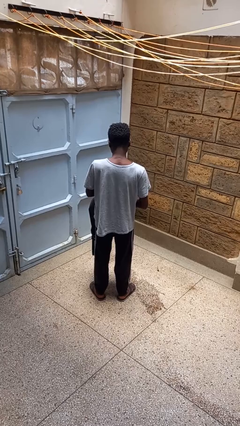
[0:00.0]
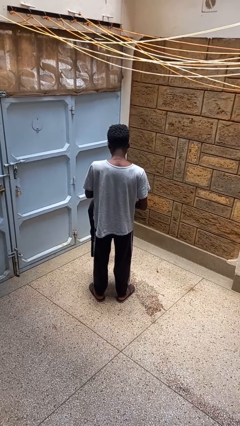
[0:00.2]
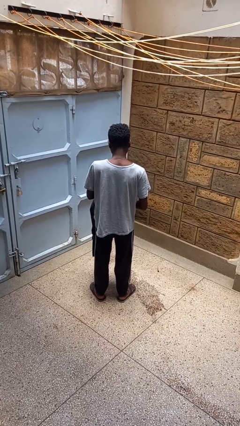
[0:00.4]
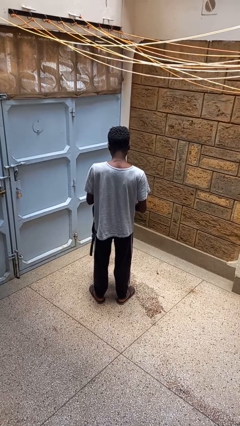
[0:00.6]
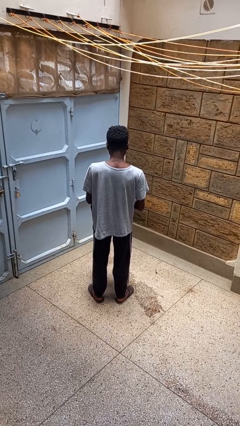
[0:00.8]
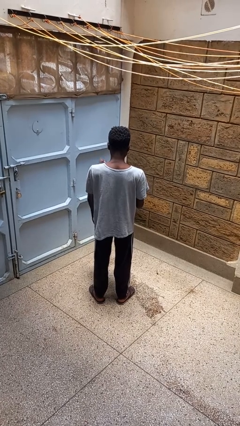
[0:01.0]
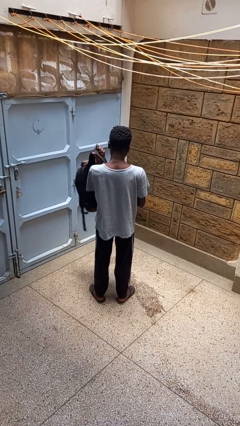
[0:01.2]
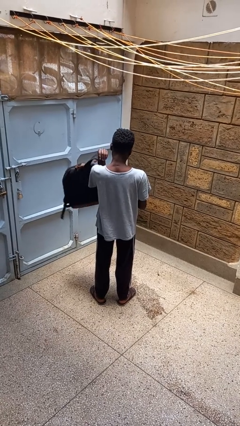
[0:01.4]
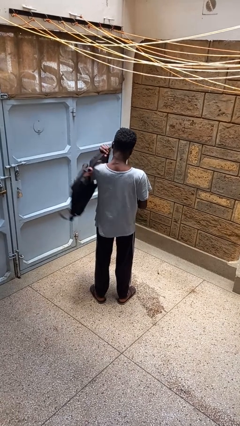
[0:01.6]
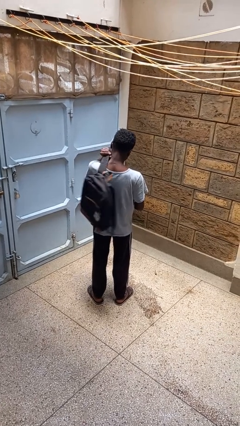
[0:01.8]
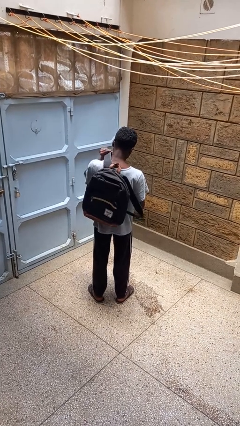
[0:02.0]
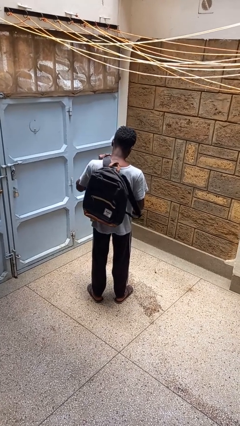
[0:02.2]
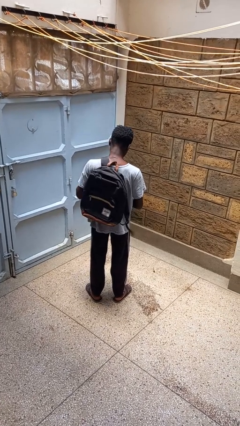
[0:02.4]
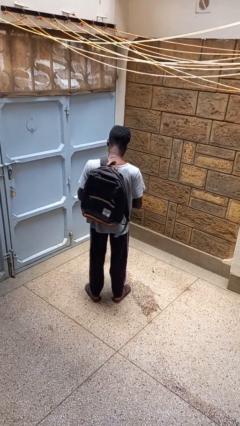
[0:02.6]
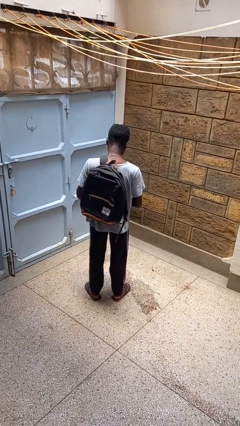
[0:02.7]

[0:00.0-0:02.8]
person puts on backpack

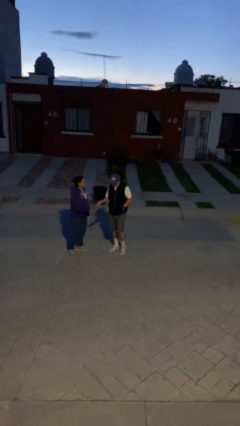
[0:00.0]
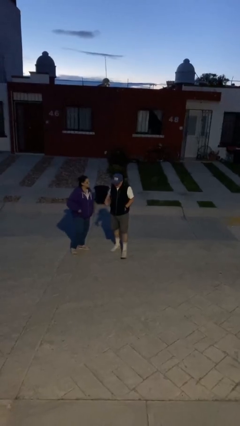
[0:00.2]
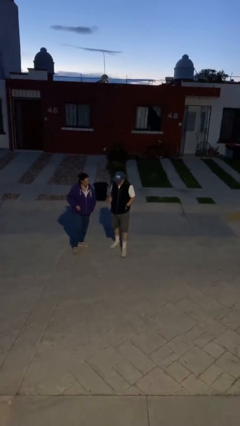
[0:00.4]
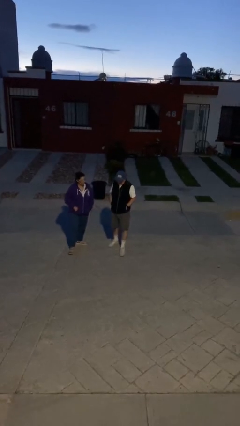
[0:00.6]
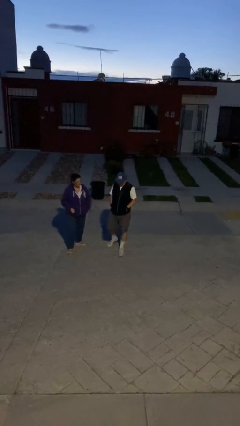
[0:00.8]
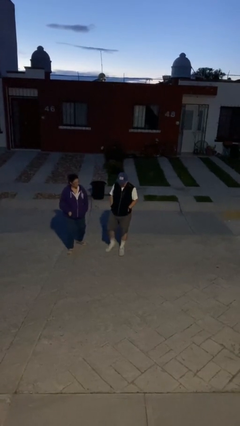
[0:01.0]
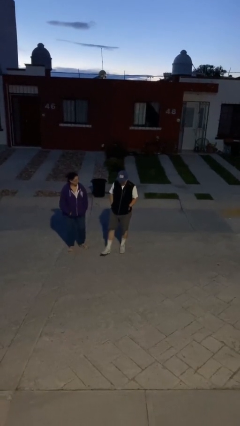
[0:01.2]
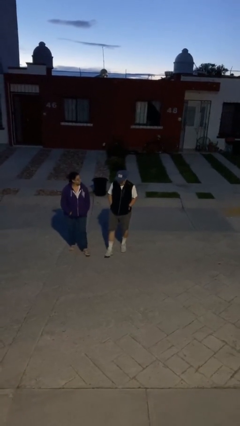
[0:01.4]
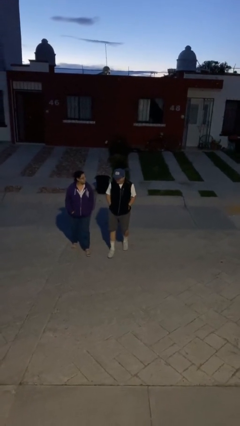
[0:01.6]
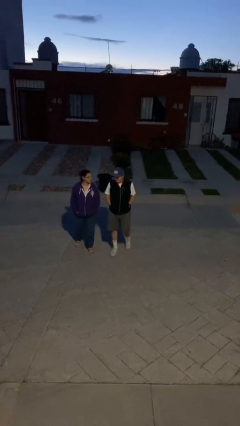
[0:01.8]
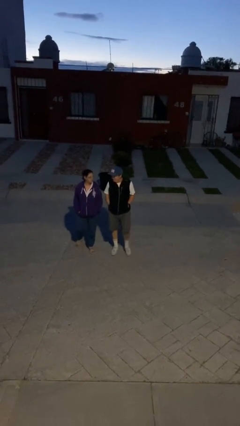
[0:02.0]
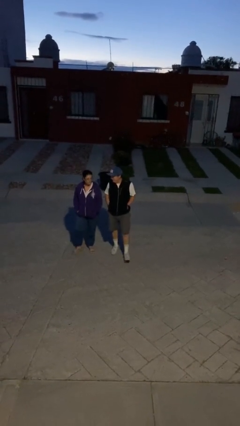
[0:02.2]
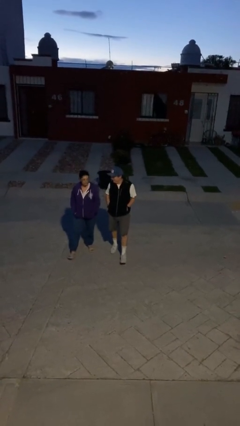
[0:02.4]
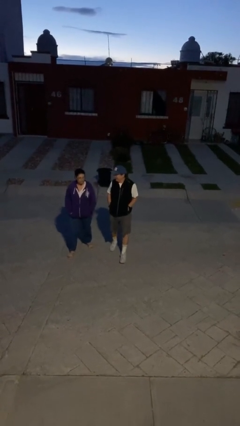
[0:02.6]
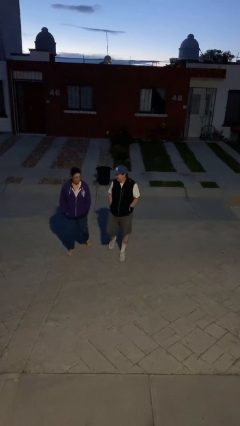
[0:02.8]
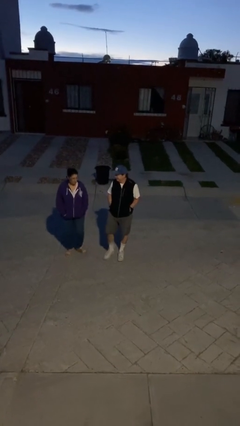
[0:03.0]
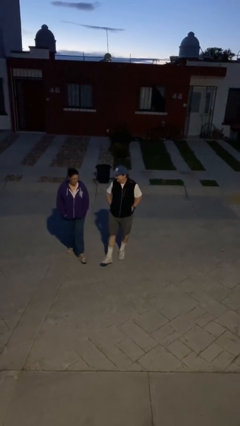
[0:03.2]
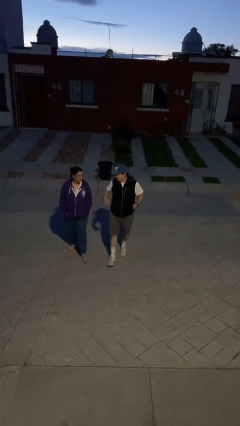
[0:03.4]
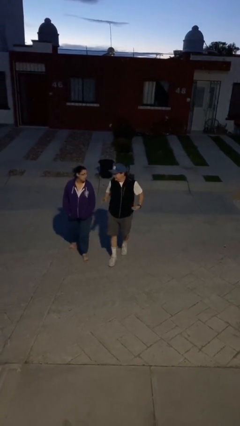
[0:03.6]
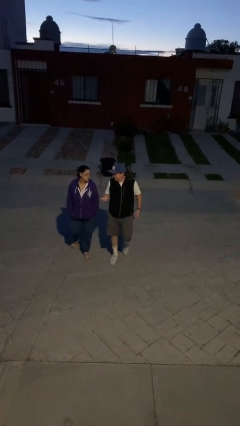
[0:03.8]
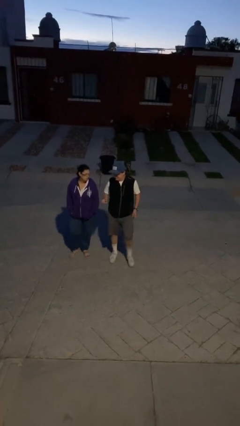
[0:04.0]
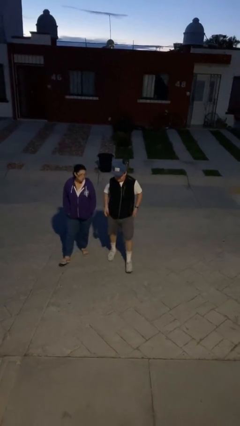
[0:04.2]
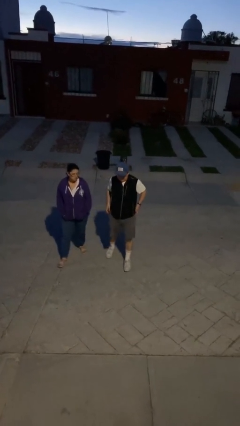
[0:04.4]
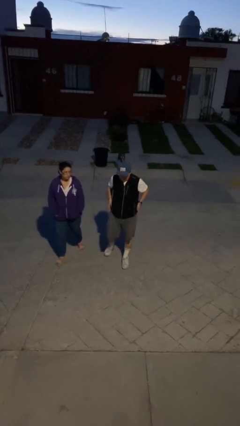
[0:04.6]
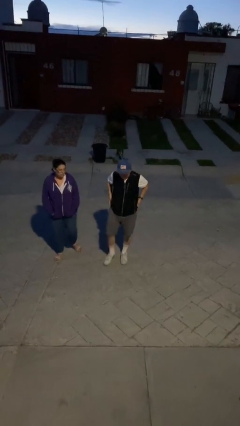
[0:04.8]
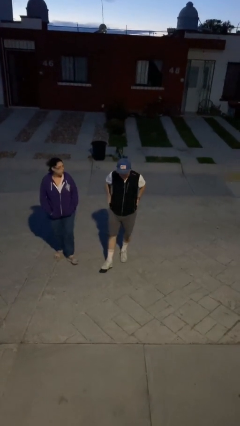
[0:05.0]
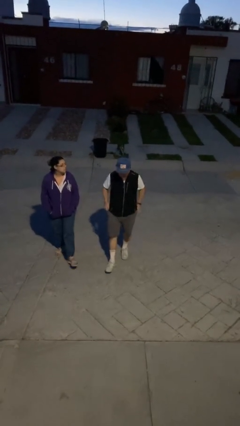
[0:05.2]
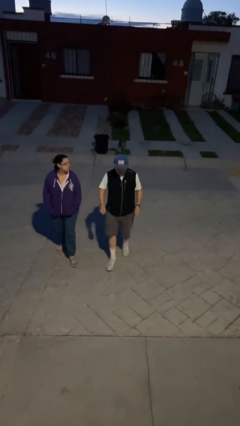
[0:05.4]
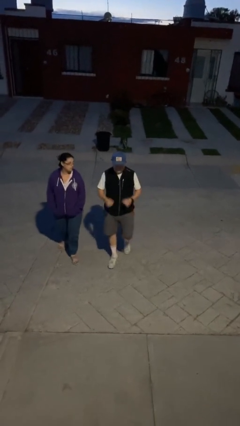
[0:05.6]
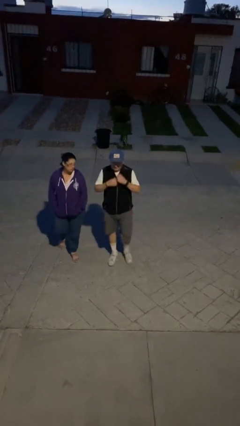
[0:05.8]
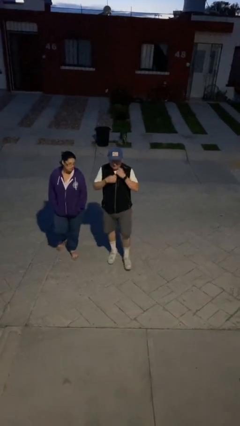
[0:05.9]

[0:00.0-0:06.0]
person talks to person

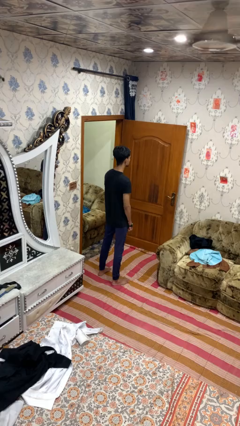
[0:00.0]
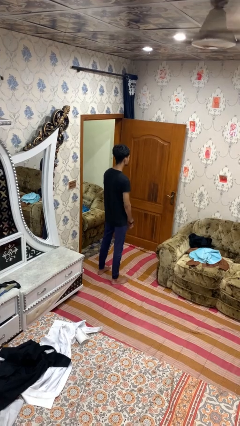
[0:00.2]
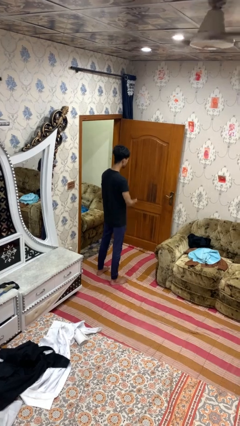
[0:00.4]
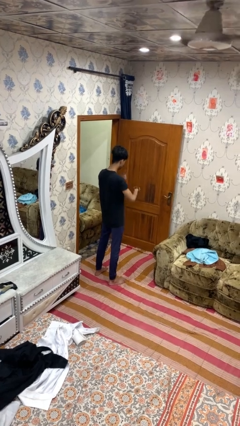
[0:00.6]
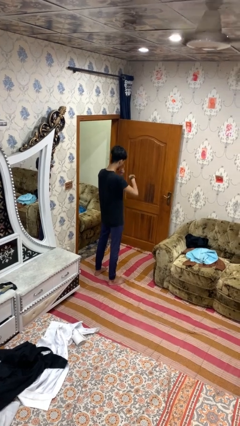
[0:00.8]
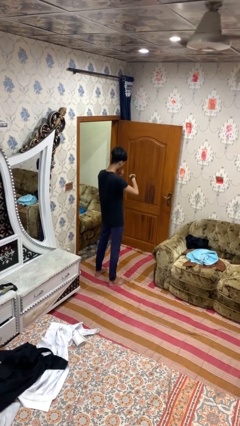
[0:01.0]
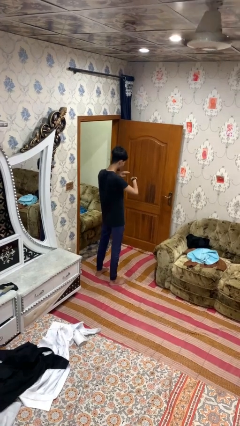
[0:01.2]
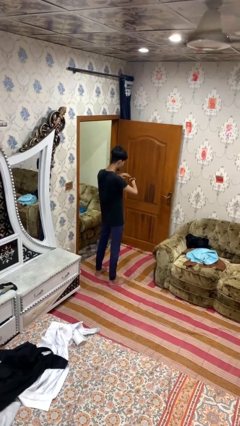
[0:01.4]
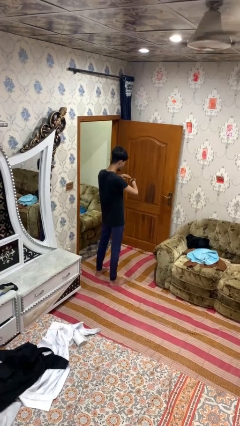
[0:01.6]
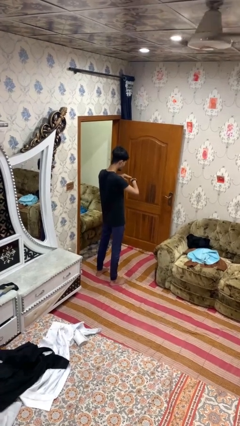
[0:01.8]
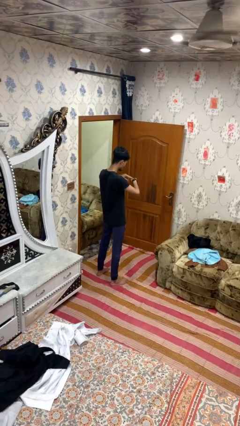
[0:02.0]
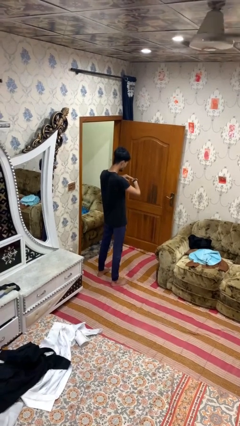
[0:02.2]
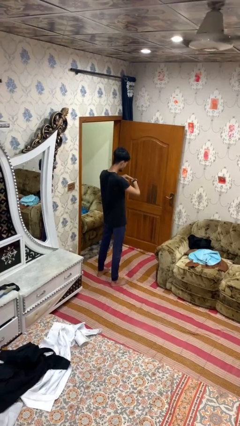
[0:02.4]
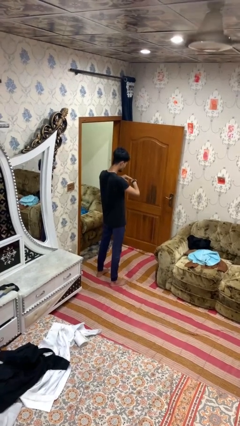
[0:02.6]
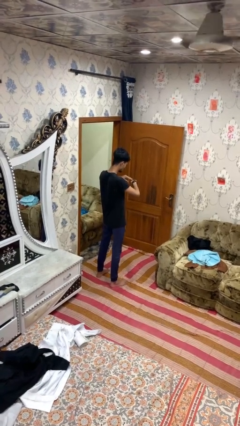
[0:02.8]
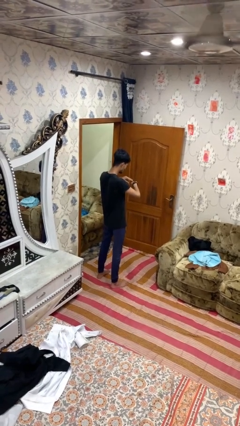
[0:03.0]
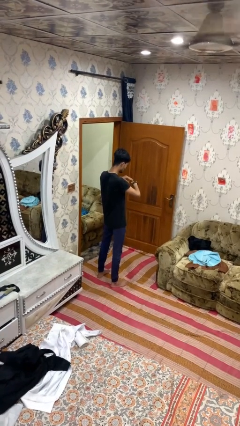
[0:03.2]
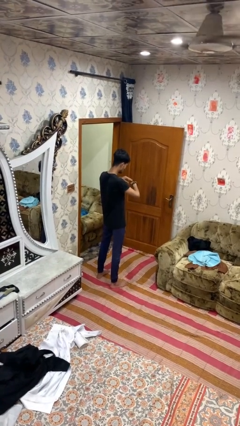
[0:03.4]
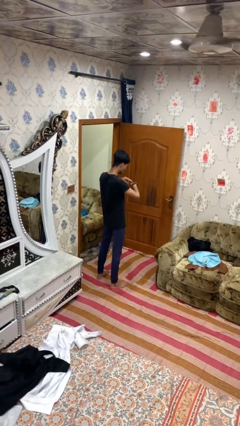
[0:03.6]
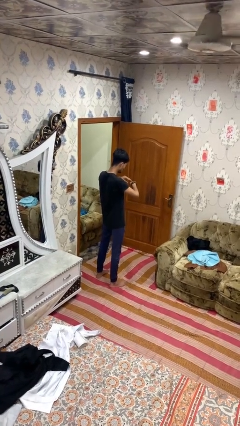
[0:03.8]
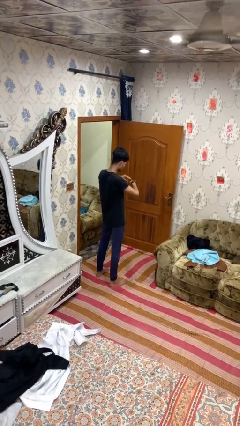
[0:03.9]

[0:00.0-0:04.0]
person gestures watch closely

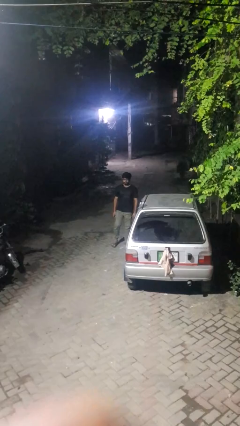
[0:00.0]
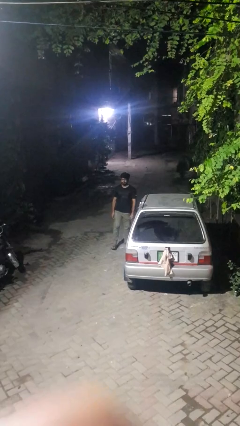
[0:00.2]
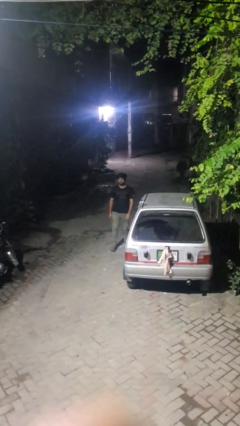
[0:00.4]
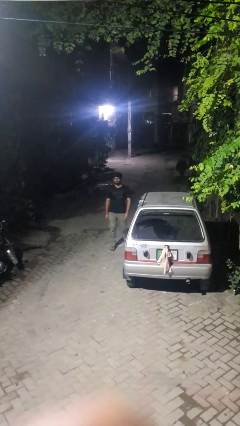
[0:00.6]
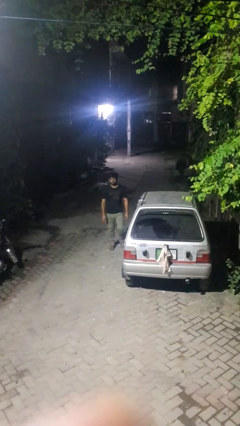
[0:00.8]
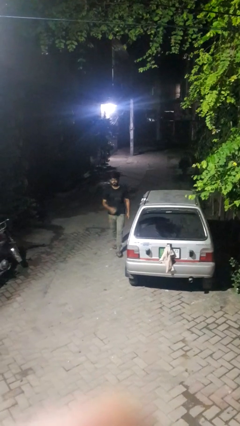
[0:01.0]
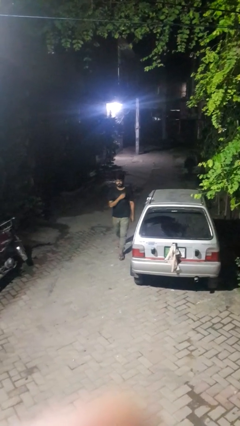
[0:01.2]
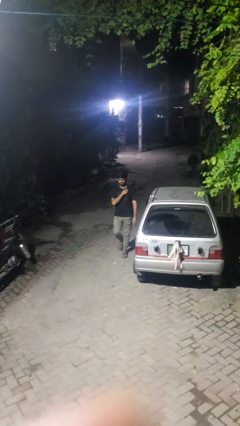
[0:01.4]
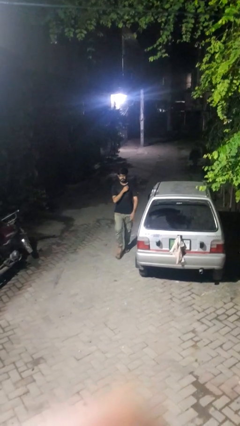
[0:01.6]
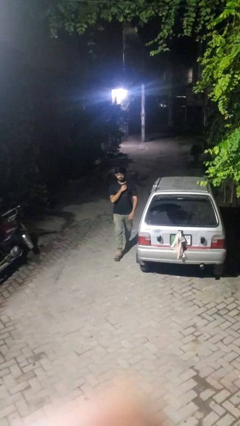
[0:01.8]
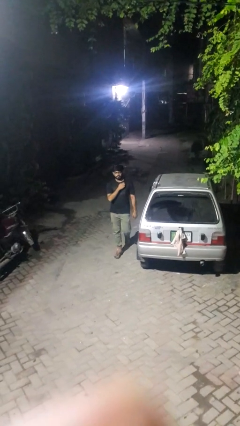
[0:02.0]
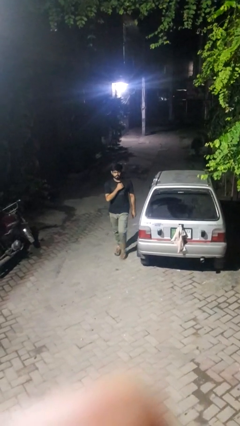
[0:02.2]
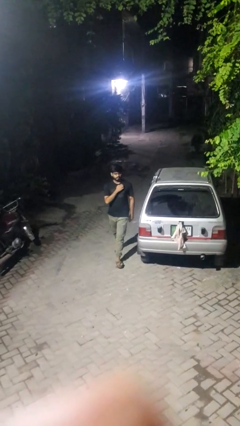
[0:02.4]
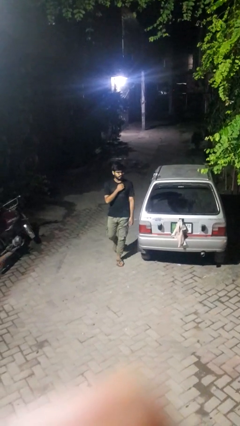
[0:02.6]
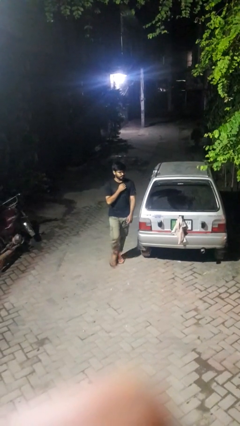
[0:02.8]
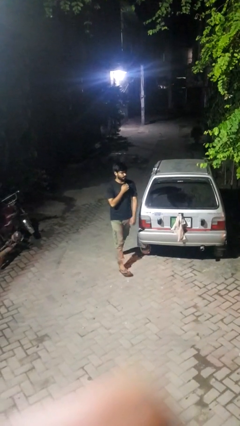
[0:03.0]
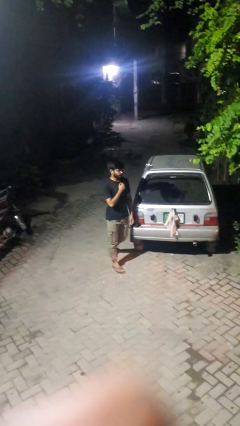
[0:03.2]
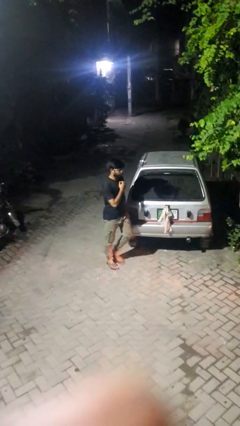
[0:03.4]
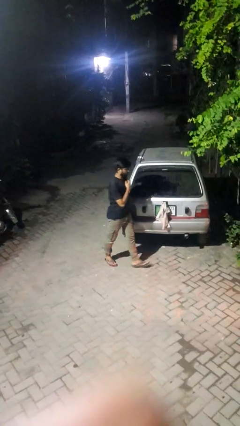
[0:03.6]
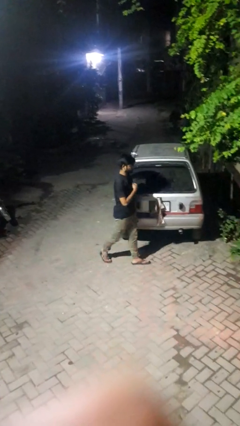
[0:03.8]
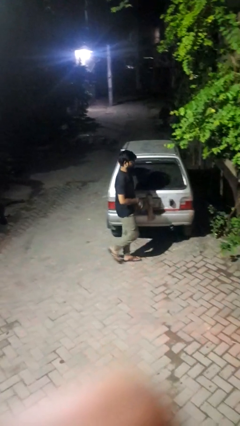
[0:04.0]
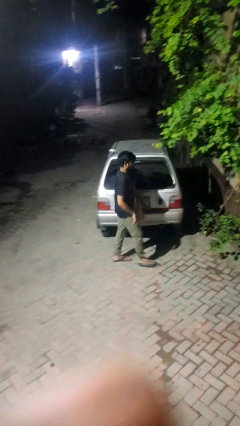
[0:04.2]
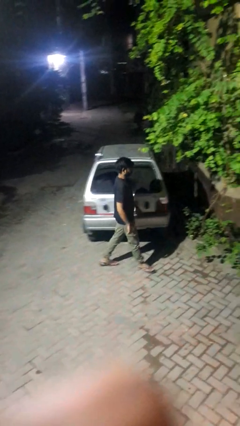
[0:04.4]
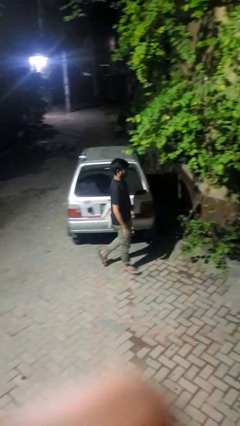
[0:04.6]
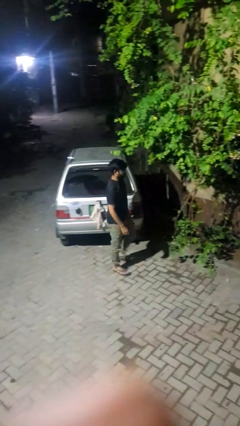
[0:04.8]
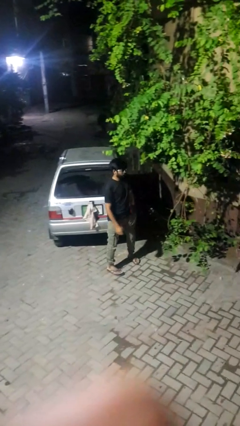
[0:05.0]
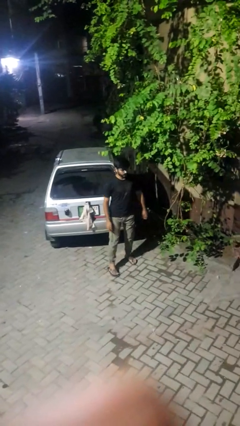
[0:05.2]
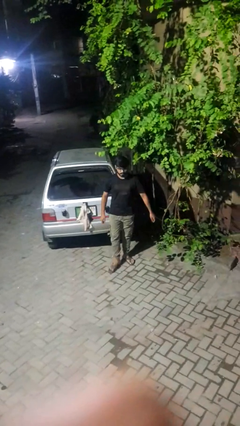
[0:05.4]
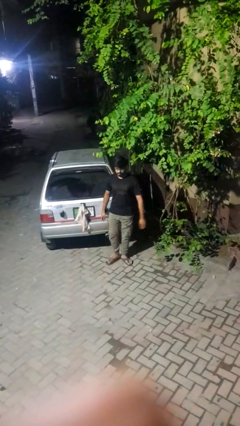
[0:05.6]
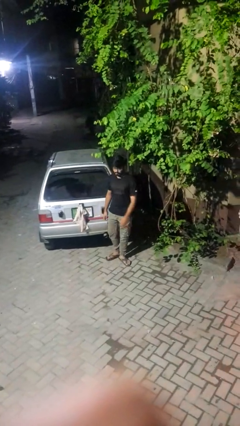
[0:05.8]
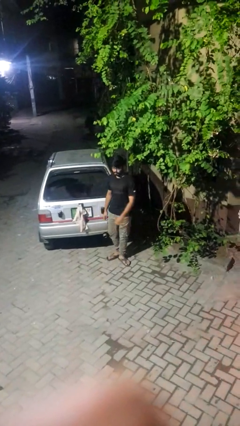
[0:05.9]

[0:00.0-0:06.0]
person walks around car
